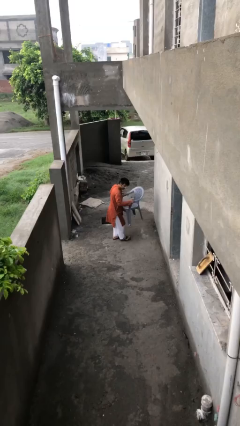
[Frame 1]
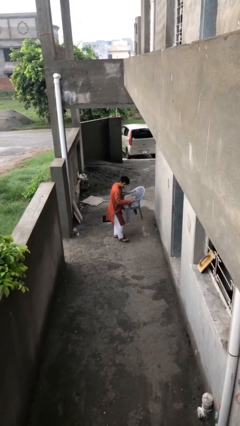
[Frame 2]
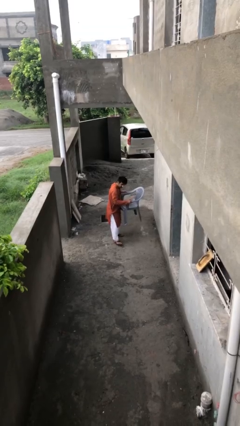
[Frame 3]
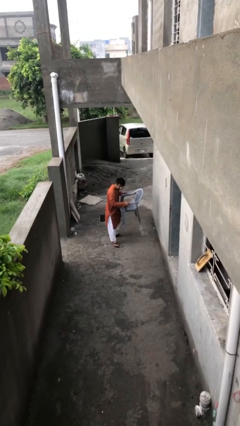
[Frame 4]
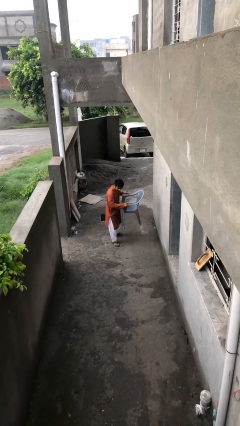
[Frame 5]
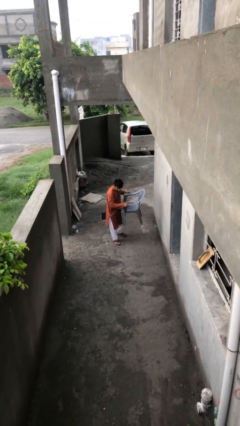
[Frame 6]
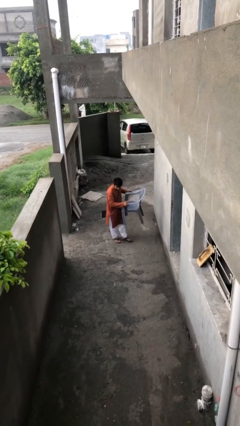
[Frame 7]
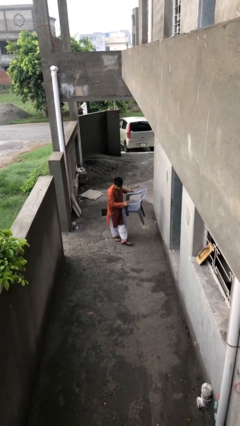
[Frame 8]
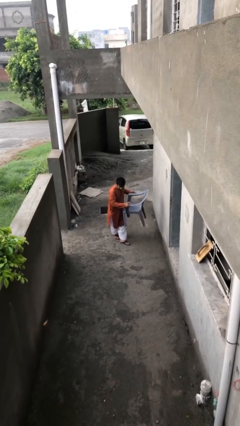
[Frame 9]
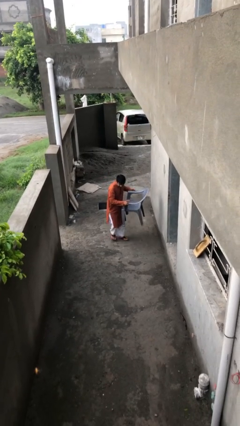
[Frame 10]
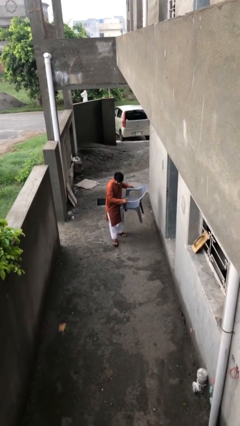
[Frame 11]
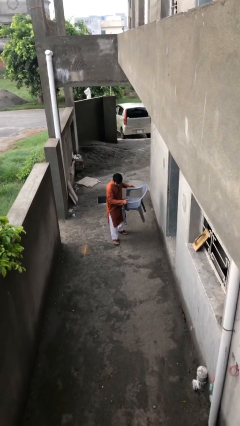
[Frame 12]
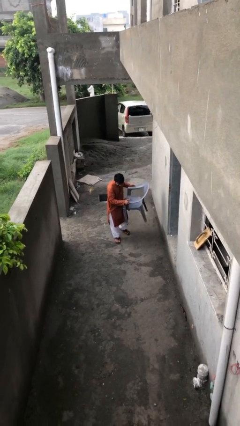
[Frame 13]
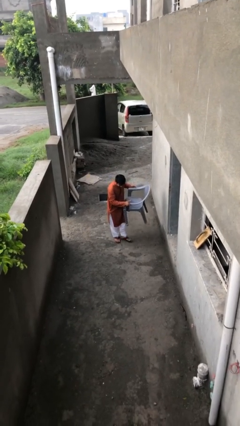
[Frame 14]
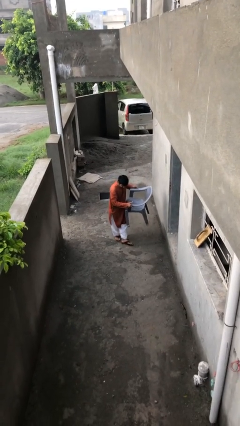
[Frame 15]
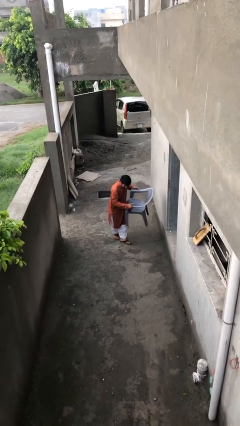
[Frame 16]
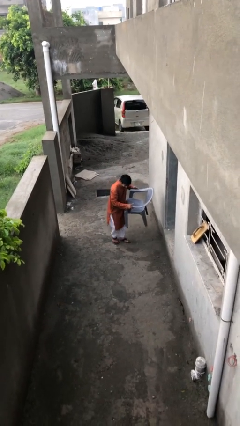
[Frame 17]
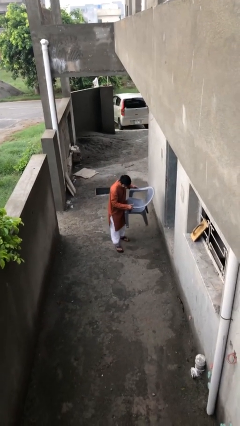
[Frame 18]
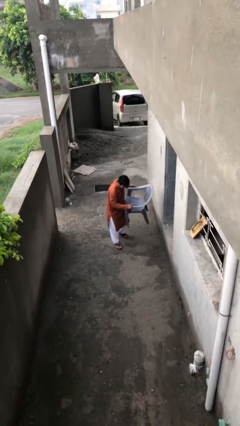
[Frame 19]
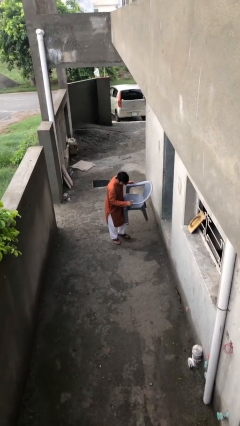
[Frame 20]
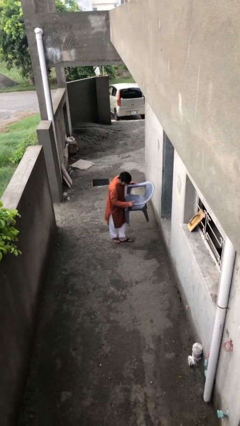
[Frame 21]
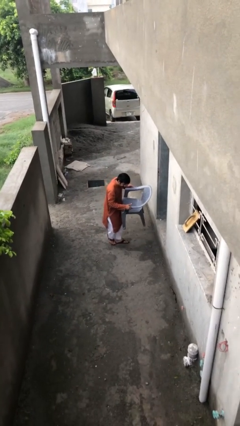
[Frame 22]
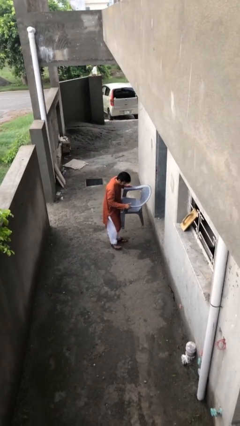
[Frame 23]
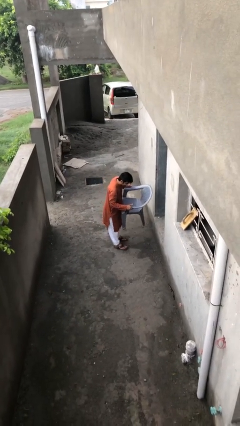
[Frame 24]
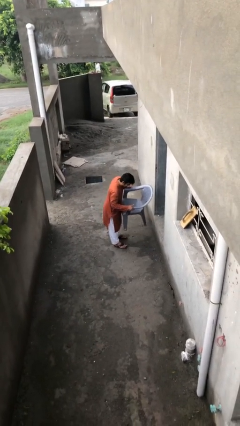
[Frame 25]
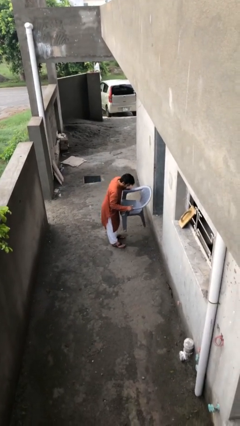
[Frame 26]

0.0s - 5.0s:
person carries heavy object

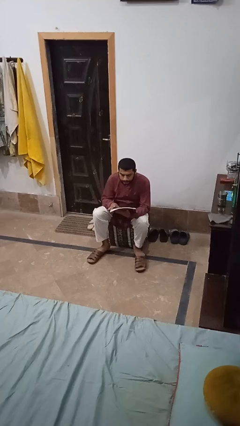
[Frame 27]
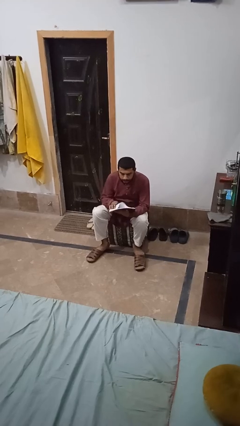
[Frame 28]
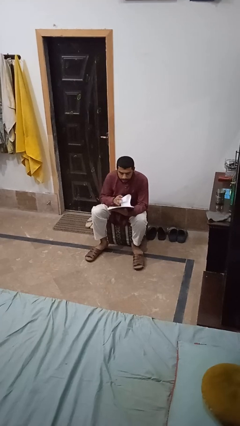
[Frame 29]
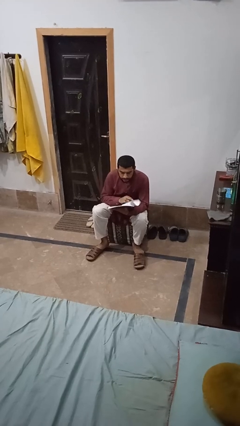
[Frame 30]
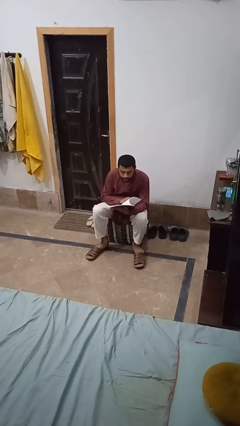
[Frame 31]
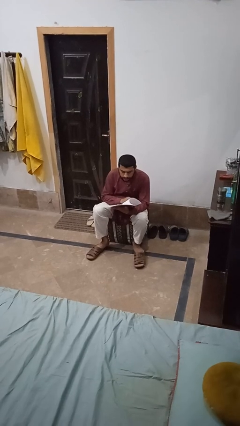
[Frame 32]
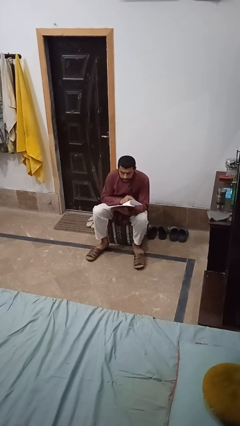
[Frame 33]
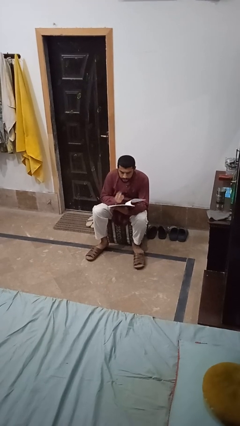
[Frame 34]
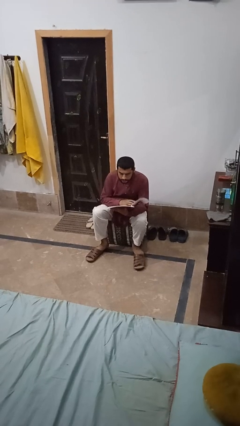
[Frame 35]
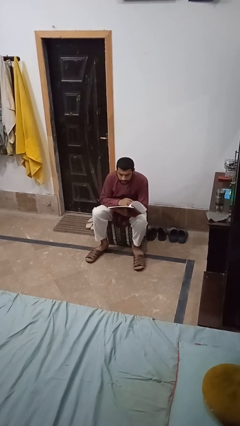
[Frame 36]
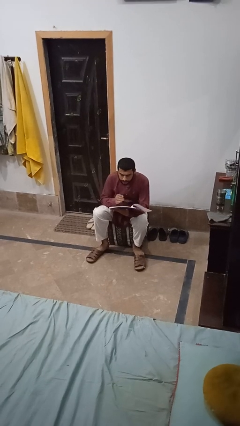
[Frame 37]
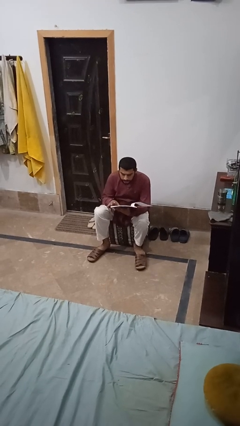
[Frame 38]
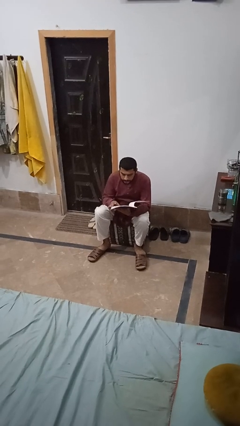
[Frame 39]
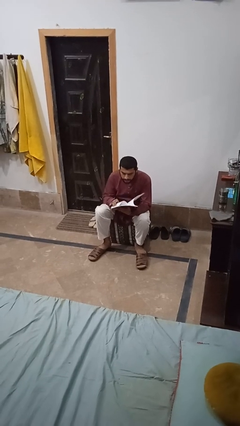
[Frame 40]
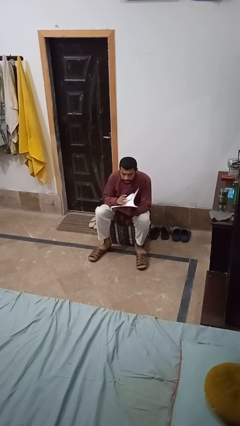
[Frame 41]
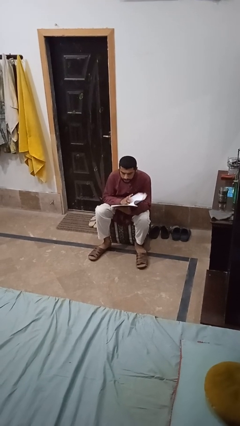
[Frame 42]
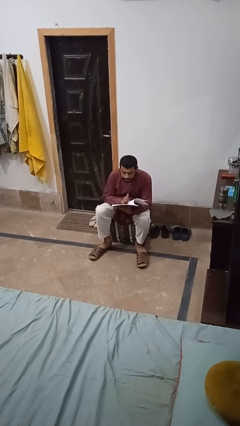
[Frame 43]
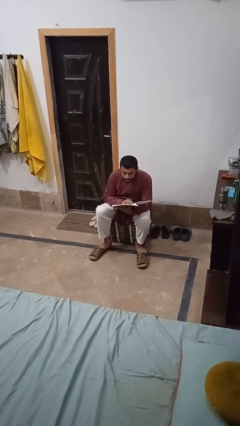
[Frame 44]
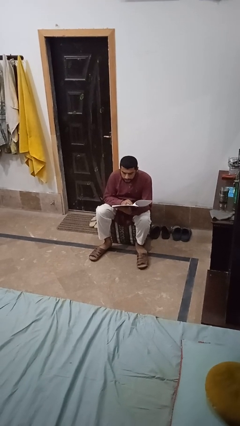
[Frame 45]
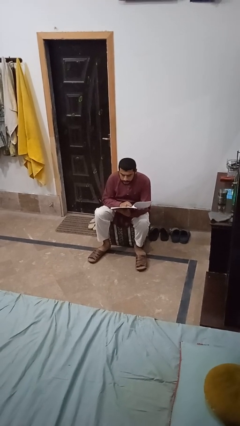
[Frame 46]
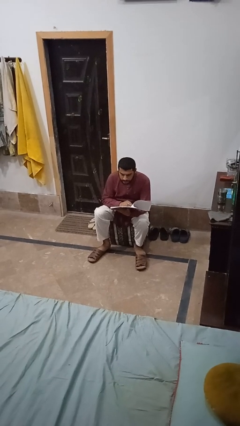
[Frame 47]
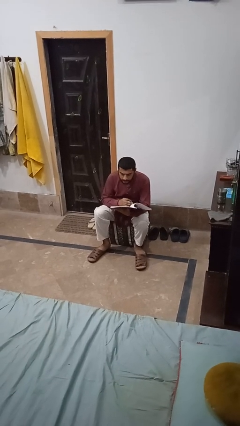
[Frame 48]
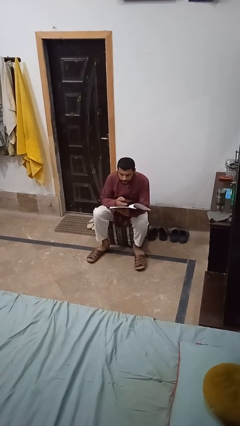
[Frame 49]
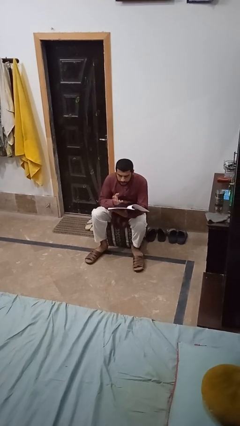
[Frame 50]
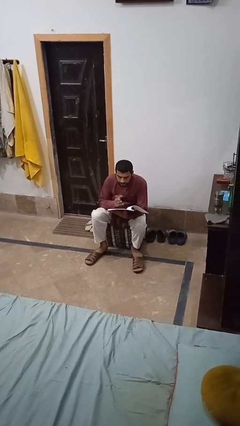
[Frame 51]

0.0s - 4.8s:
person stands up from floor

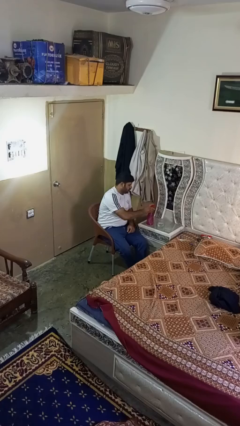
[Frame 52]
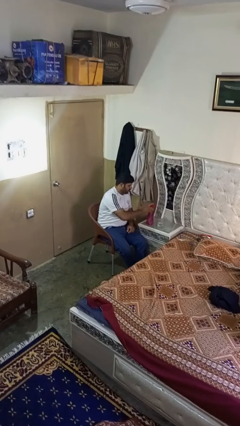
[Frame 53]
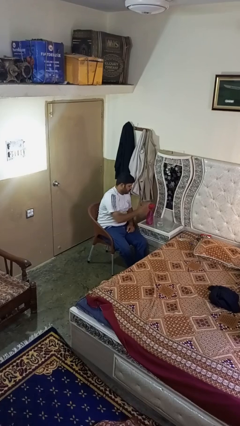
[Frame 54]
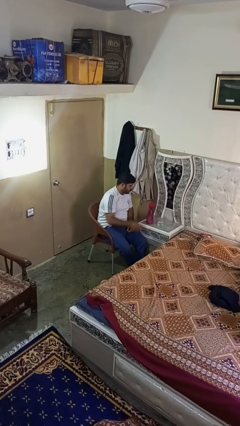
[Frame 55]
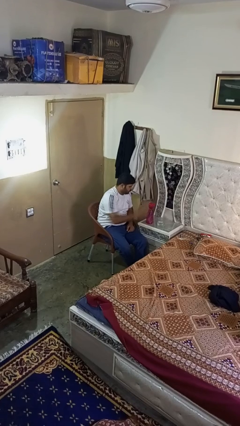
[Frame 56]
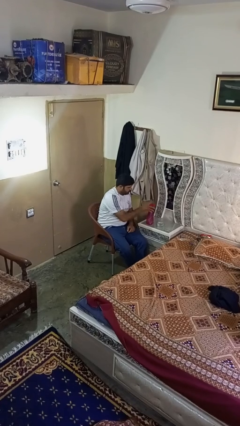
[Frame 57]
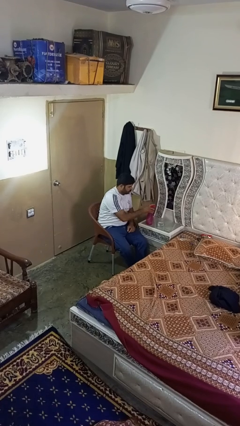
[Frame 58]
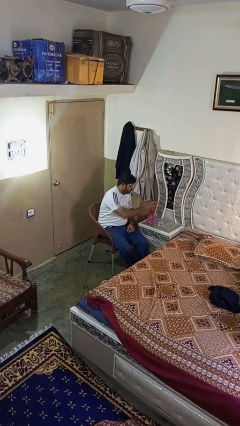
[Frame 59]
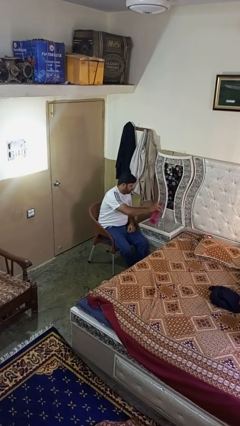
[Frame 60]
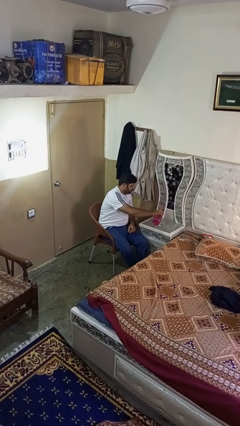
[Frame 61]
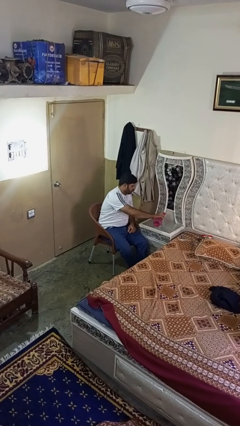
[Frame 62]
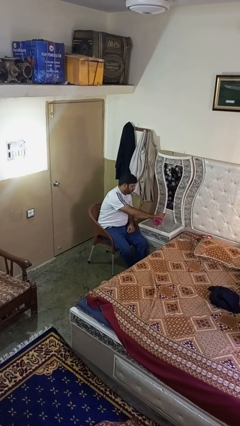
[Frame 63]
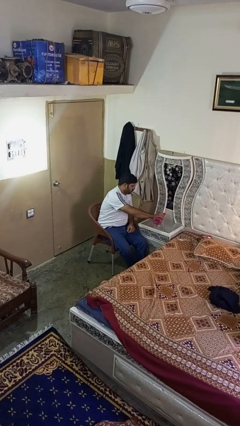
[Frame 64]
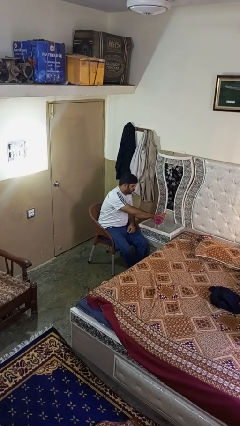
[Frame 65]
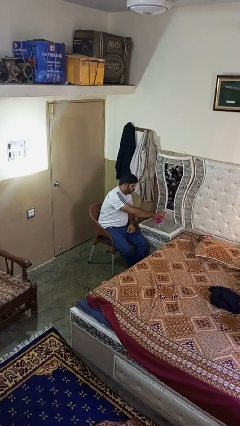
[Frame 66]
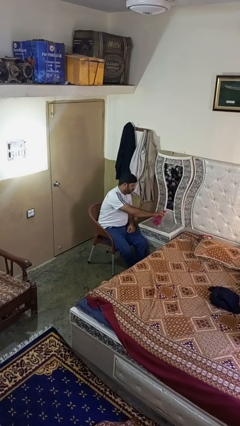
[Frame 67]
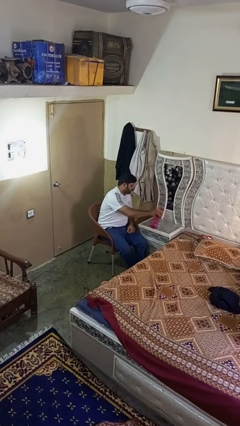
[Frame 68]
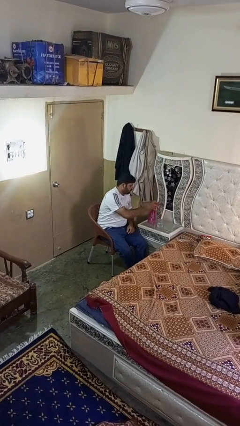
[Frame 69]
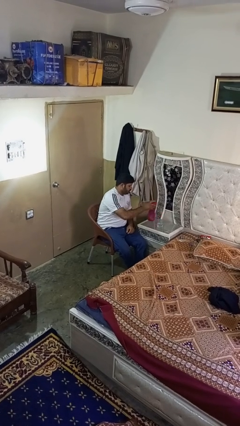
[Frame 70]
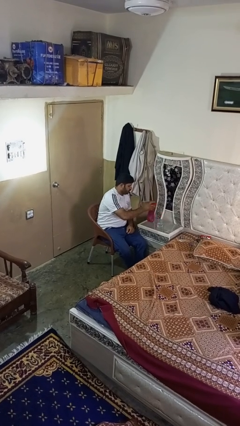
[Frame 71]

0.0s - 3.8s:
person pours liquid into cup

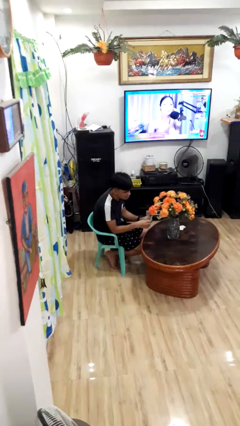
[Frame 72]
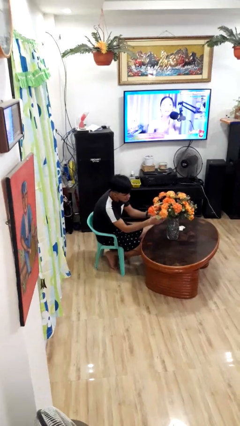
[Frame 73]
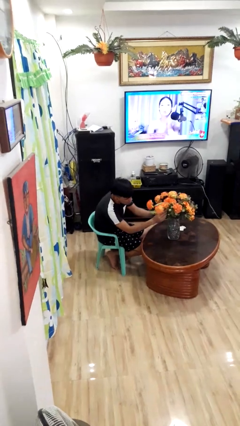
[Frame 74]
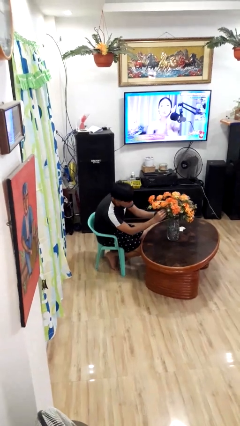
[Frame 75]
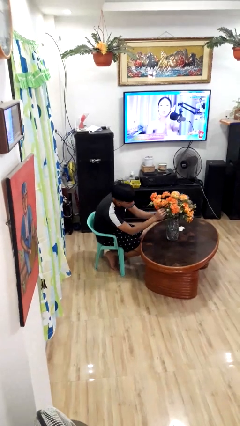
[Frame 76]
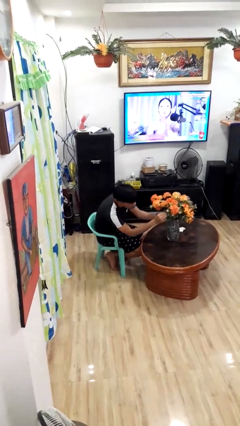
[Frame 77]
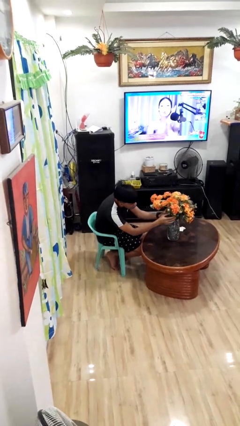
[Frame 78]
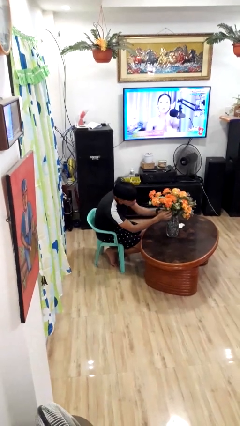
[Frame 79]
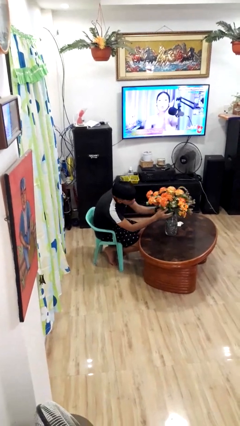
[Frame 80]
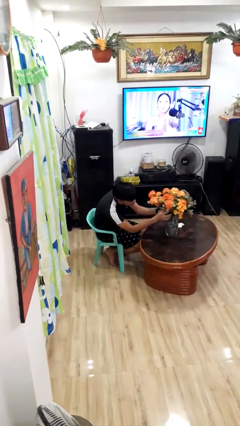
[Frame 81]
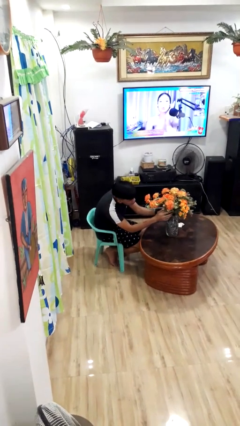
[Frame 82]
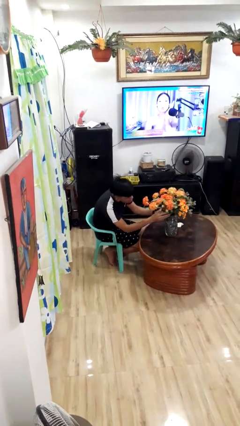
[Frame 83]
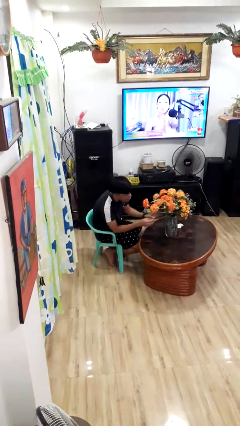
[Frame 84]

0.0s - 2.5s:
person arranges flowers in vase

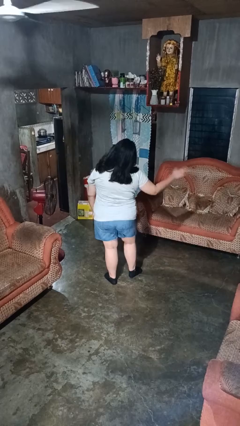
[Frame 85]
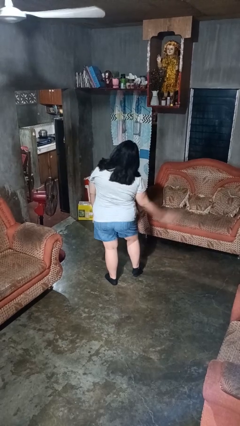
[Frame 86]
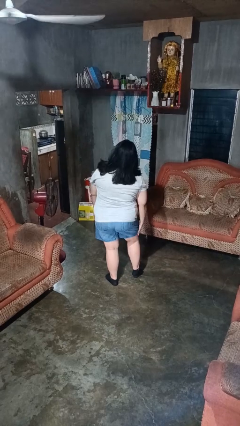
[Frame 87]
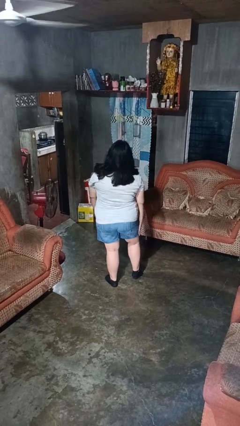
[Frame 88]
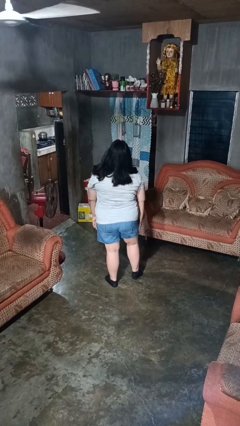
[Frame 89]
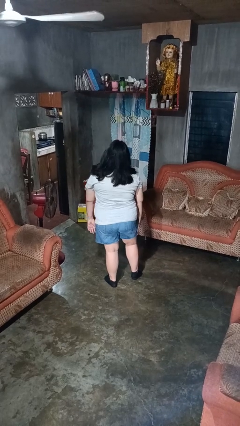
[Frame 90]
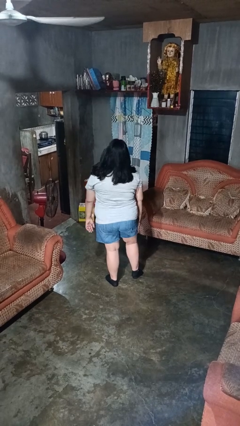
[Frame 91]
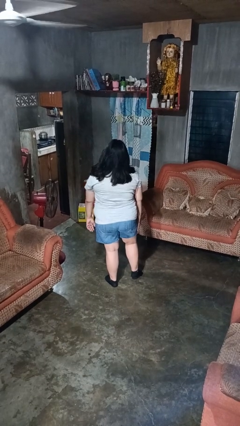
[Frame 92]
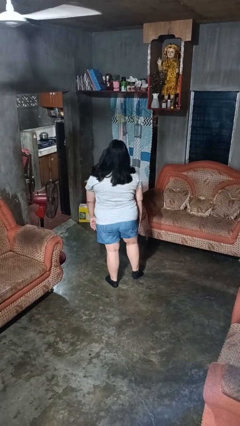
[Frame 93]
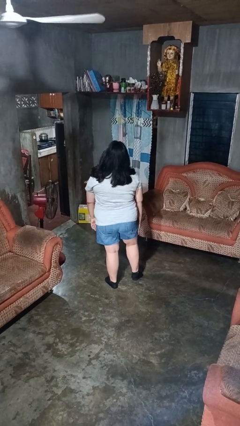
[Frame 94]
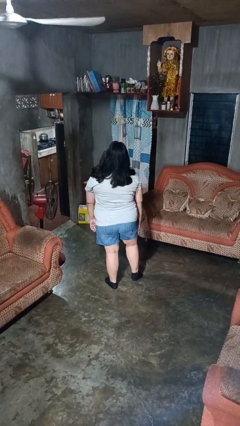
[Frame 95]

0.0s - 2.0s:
person swats bug
